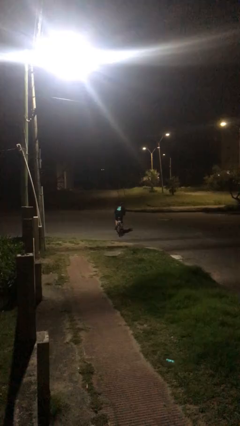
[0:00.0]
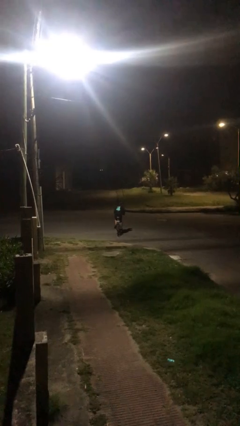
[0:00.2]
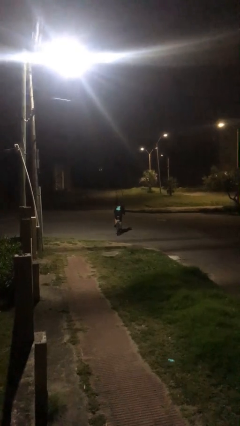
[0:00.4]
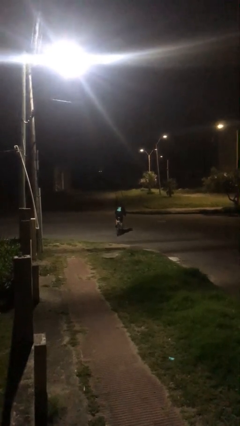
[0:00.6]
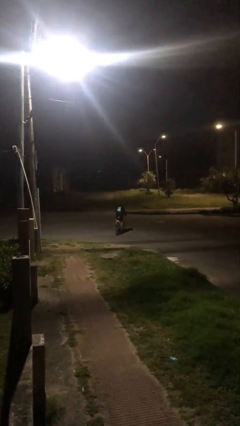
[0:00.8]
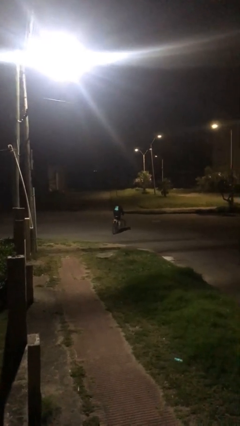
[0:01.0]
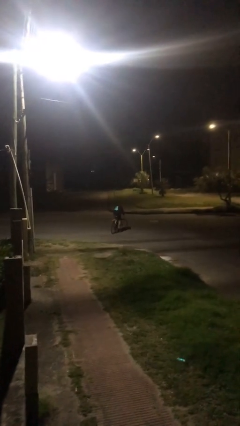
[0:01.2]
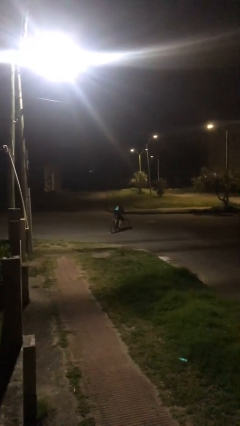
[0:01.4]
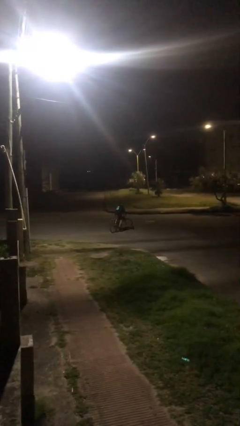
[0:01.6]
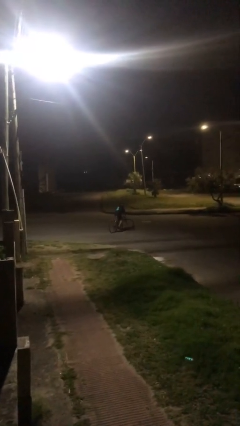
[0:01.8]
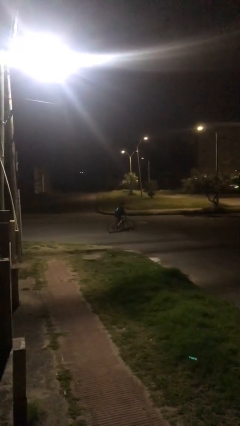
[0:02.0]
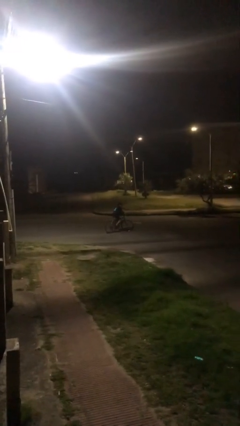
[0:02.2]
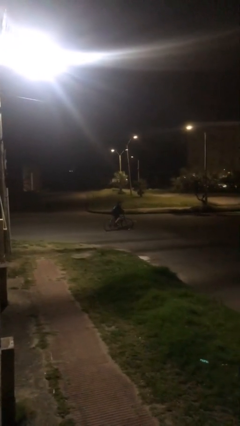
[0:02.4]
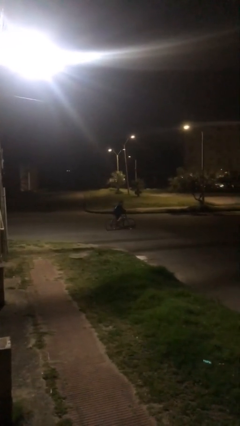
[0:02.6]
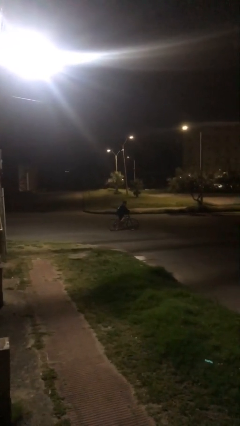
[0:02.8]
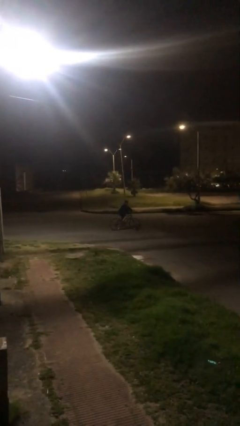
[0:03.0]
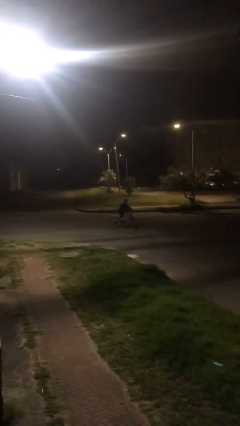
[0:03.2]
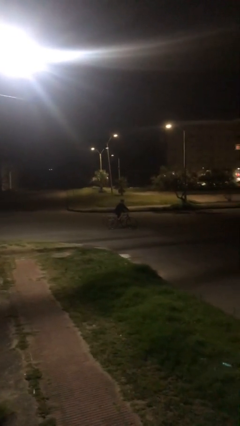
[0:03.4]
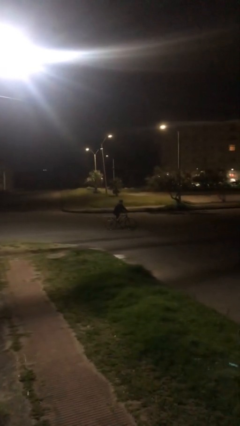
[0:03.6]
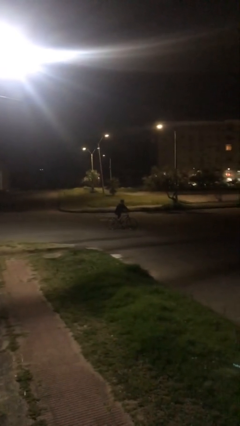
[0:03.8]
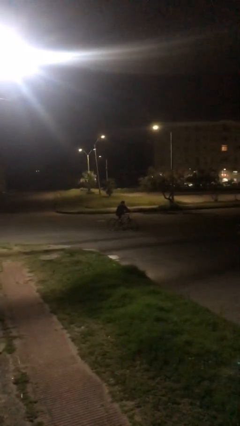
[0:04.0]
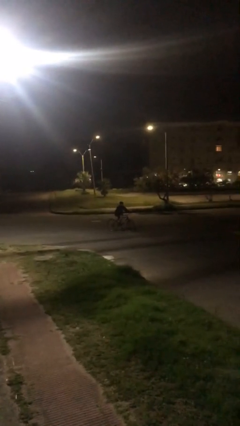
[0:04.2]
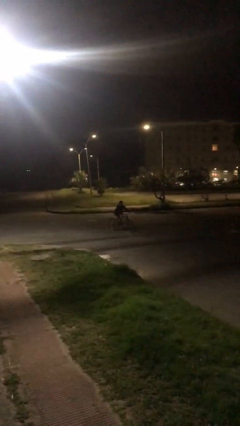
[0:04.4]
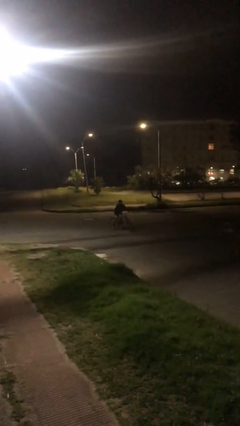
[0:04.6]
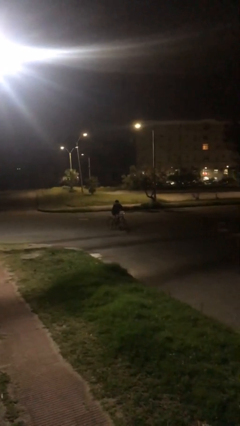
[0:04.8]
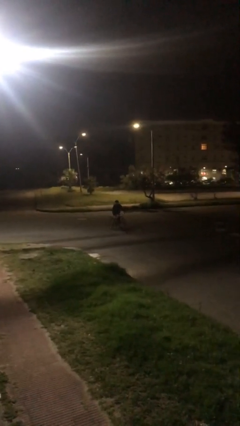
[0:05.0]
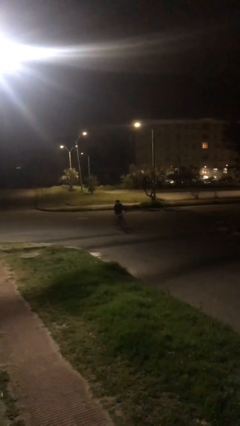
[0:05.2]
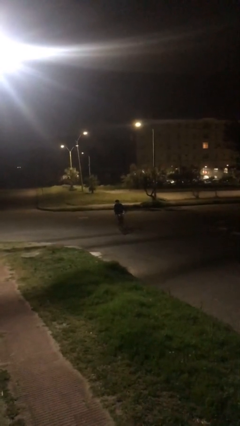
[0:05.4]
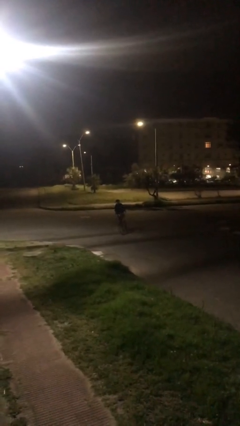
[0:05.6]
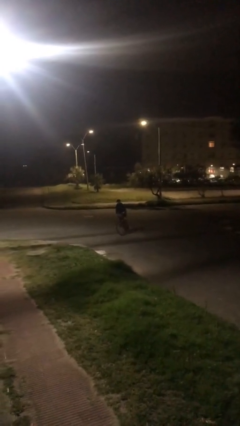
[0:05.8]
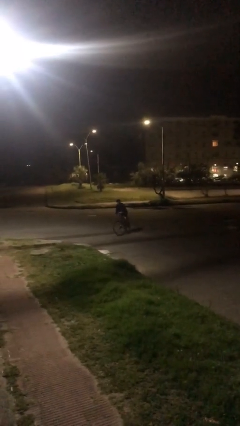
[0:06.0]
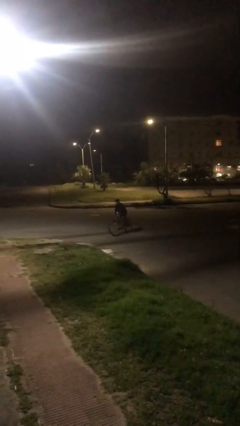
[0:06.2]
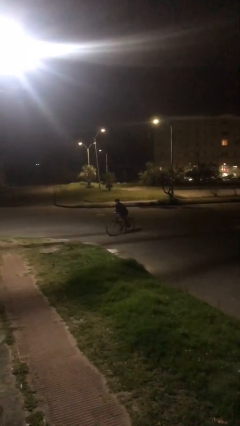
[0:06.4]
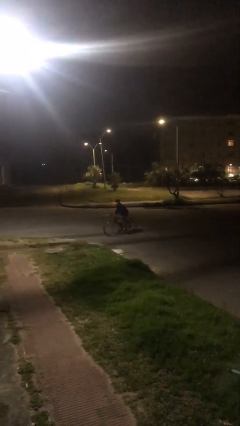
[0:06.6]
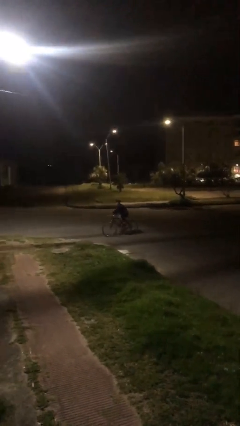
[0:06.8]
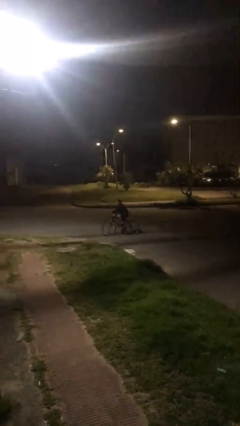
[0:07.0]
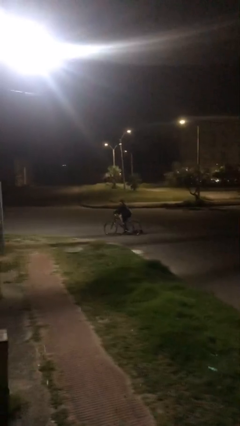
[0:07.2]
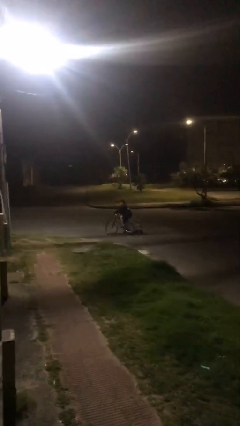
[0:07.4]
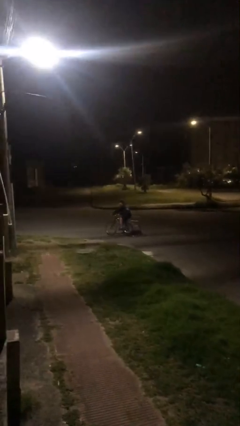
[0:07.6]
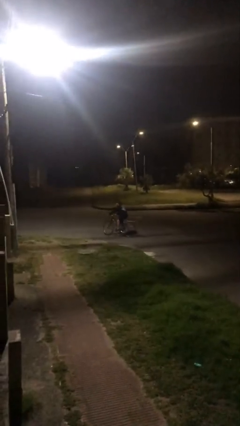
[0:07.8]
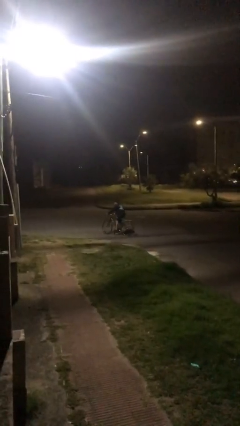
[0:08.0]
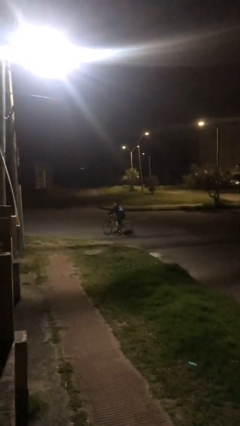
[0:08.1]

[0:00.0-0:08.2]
person rides bicycle

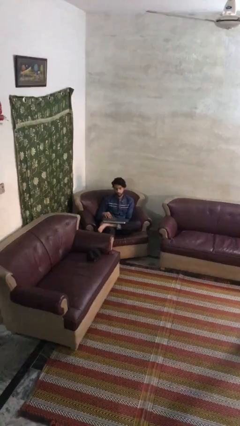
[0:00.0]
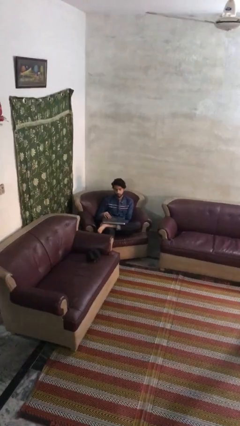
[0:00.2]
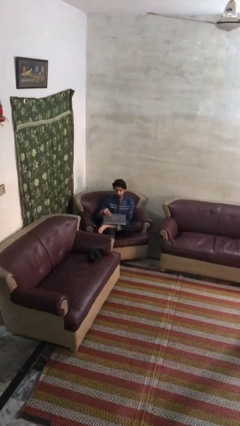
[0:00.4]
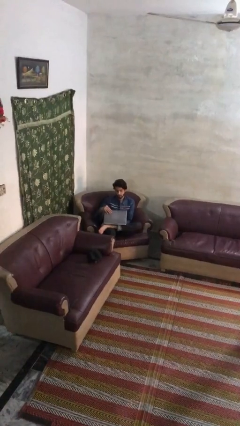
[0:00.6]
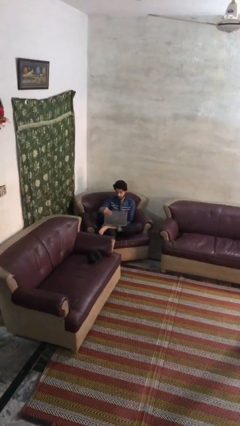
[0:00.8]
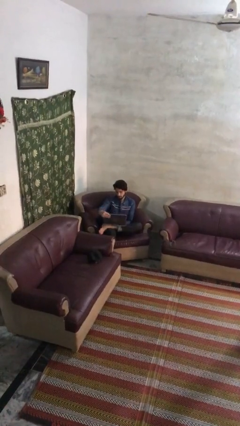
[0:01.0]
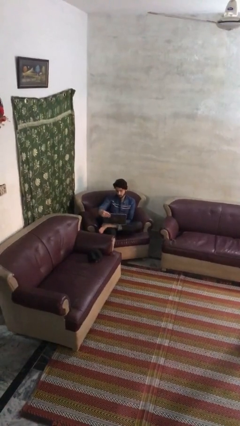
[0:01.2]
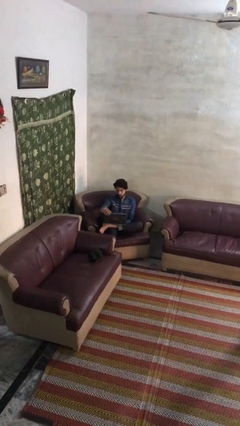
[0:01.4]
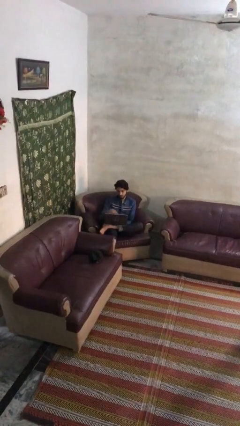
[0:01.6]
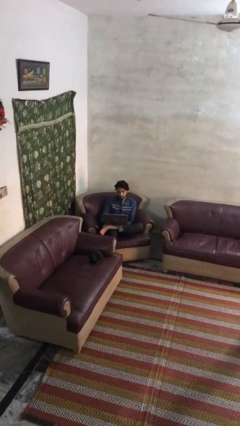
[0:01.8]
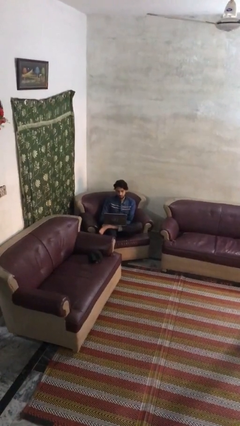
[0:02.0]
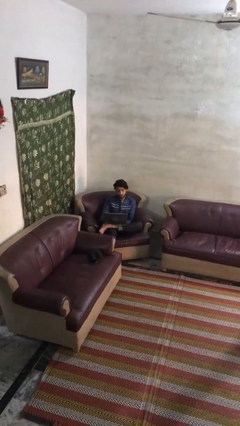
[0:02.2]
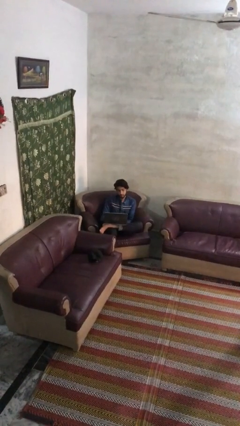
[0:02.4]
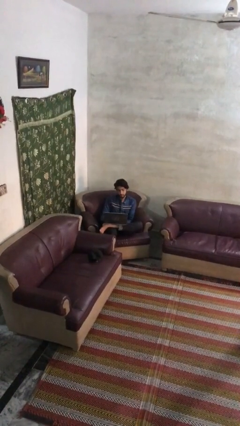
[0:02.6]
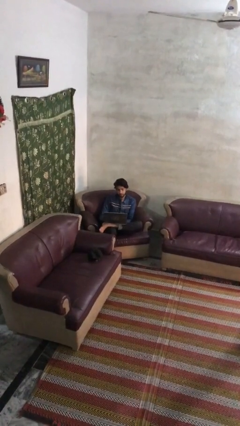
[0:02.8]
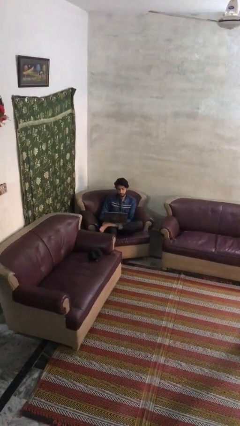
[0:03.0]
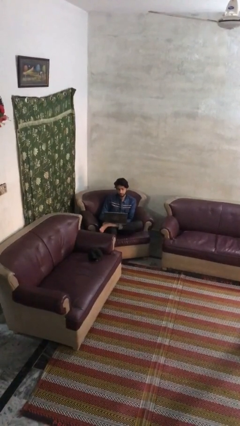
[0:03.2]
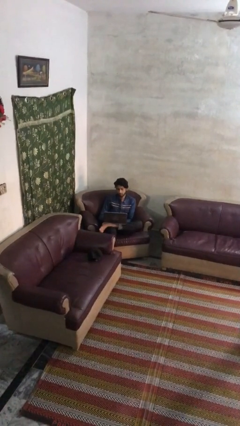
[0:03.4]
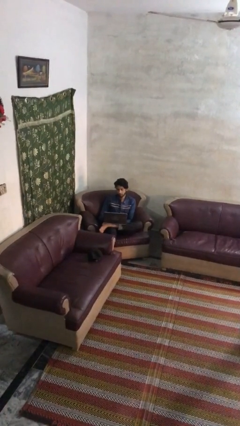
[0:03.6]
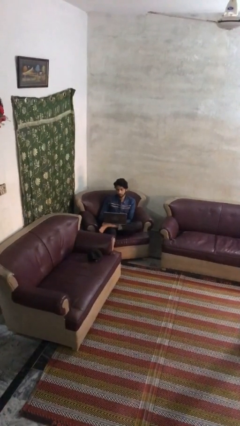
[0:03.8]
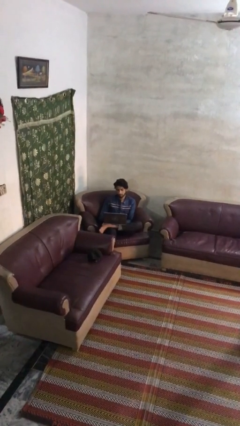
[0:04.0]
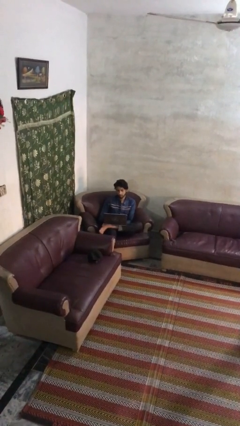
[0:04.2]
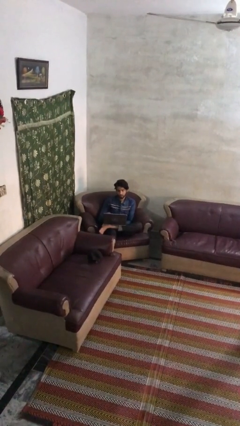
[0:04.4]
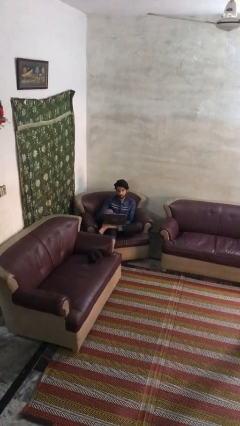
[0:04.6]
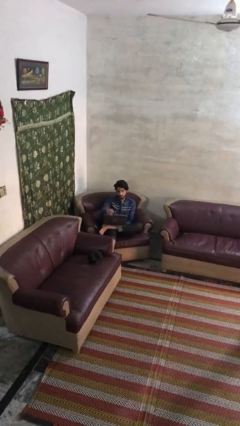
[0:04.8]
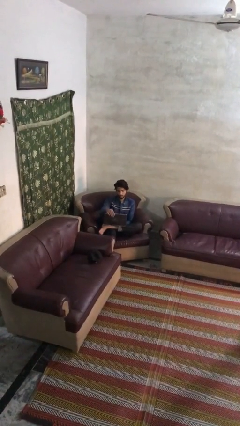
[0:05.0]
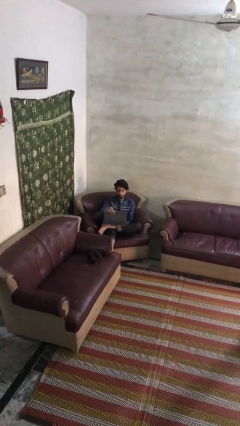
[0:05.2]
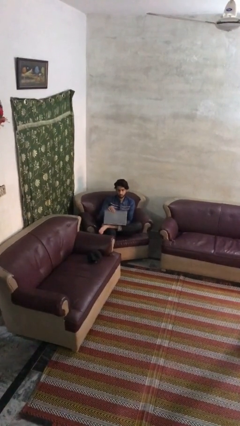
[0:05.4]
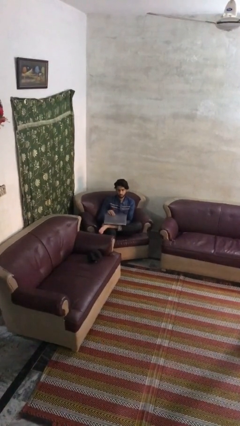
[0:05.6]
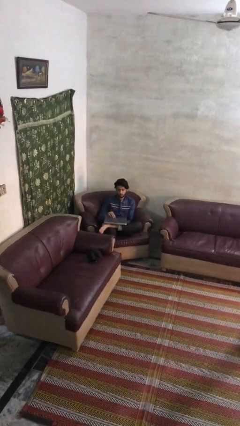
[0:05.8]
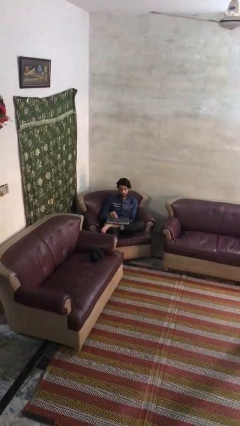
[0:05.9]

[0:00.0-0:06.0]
person interacts with laptop

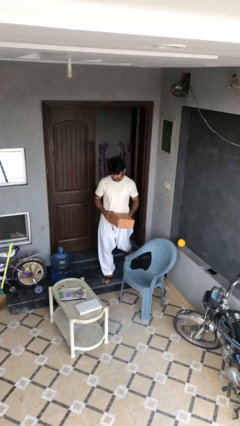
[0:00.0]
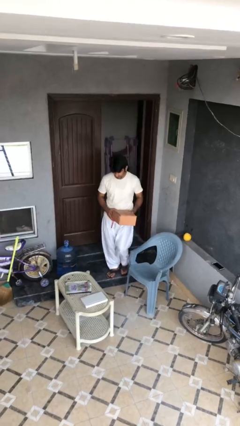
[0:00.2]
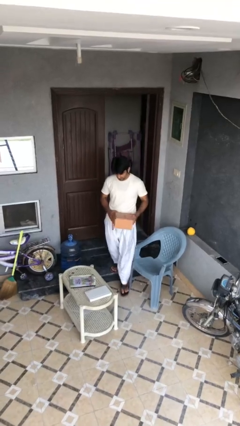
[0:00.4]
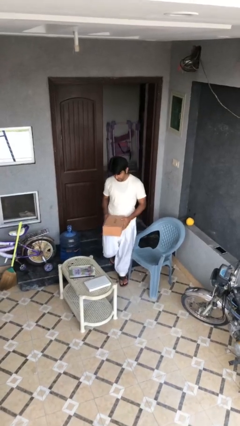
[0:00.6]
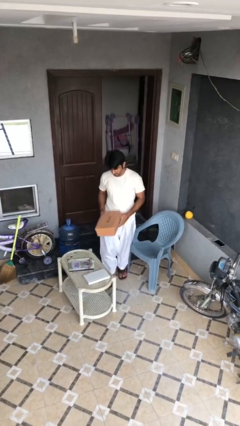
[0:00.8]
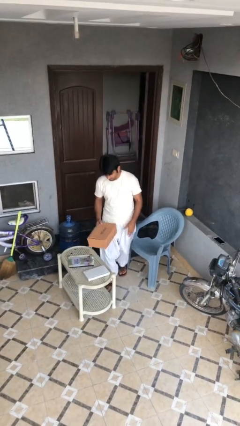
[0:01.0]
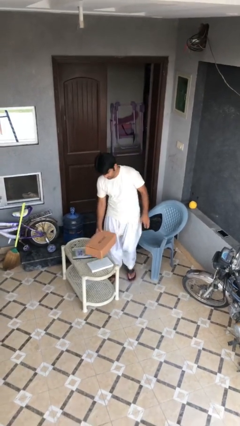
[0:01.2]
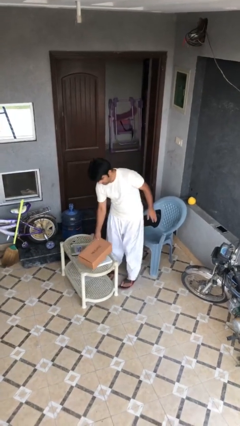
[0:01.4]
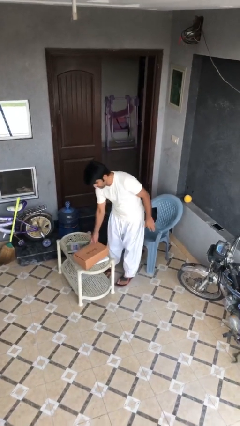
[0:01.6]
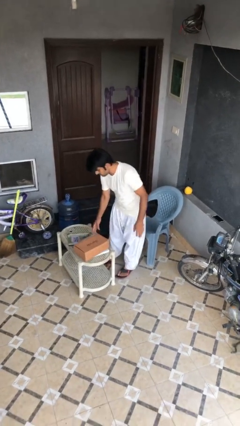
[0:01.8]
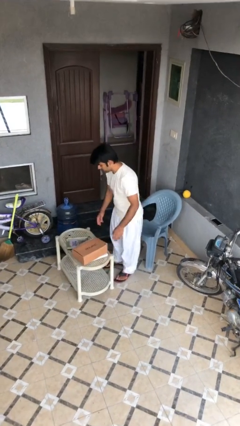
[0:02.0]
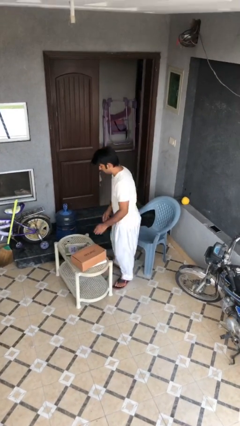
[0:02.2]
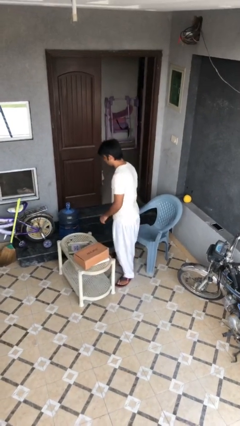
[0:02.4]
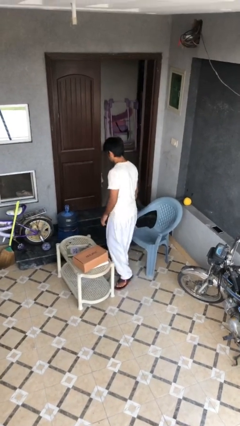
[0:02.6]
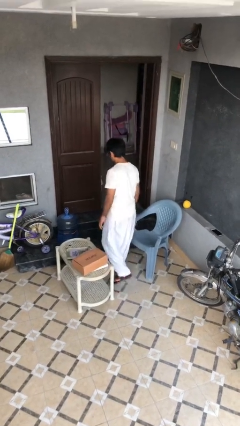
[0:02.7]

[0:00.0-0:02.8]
person puts down object on table

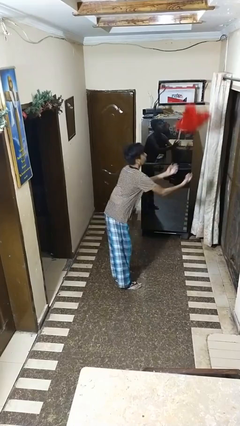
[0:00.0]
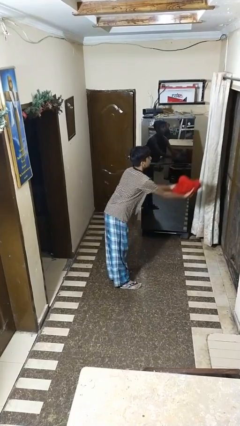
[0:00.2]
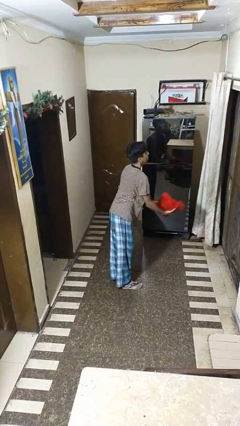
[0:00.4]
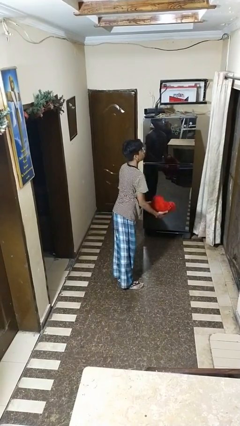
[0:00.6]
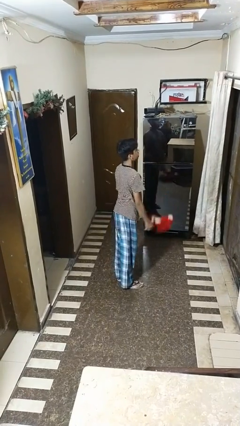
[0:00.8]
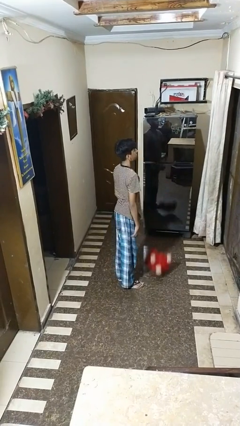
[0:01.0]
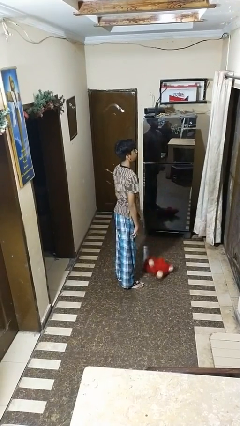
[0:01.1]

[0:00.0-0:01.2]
person catches dropped object
